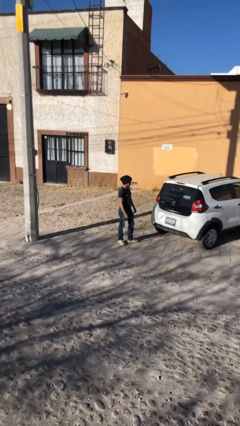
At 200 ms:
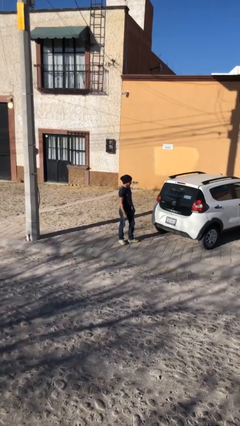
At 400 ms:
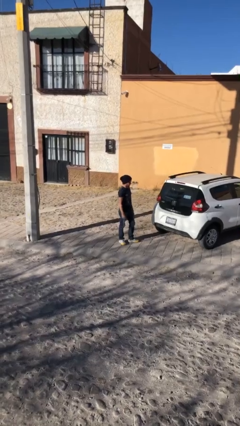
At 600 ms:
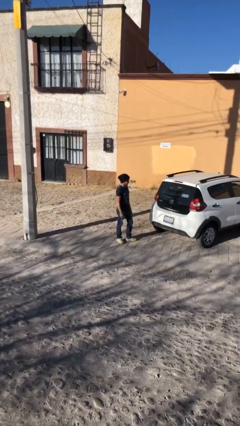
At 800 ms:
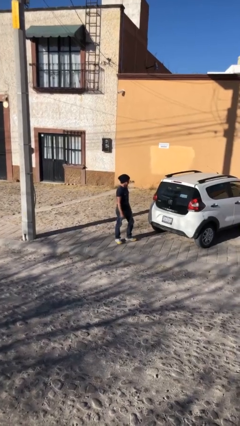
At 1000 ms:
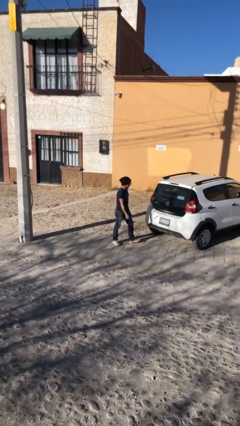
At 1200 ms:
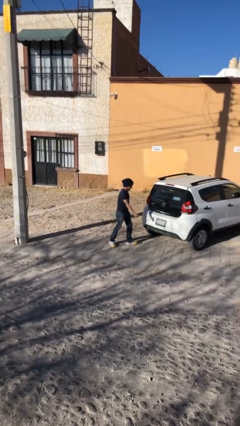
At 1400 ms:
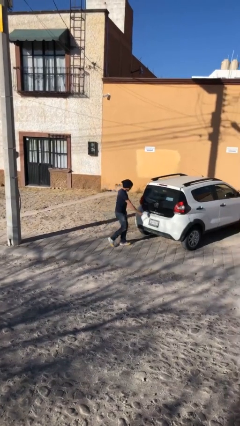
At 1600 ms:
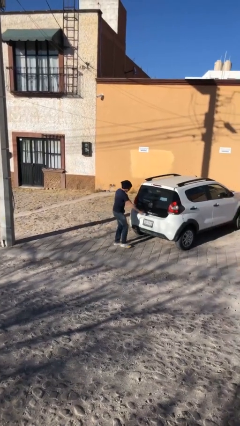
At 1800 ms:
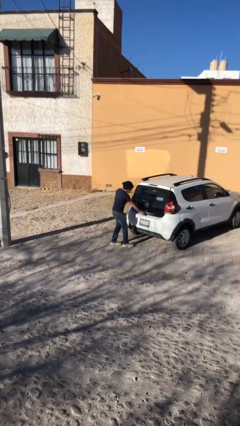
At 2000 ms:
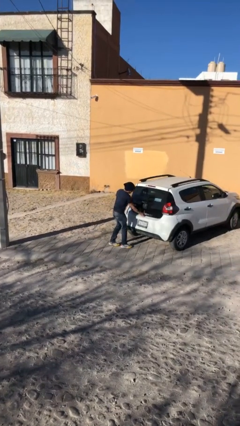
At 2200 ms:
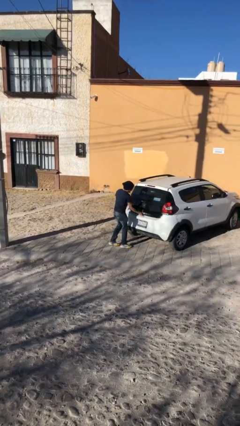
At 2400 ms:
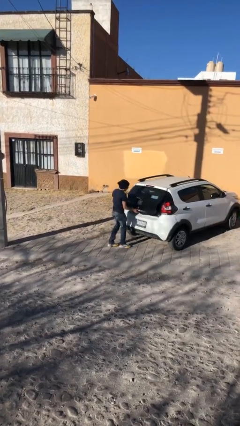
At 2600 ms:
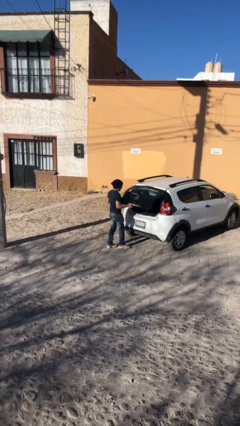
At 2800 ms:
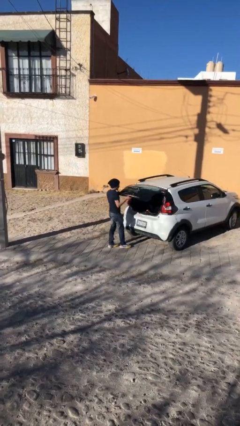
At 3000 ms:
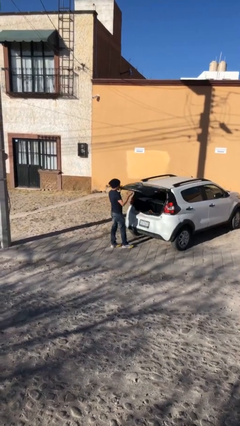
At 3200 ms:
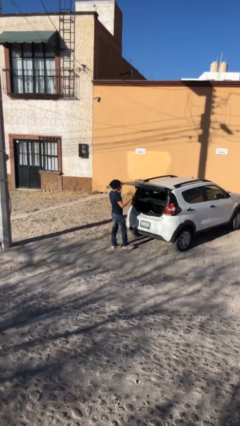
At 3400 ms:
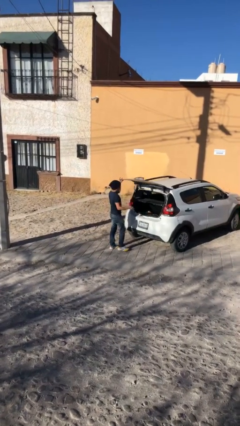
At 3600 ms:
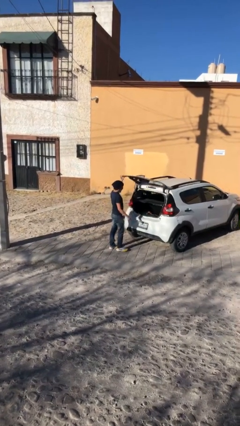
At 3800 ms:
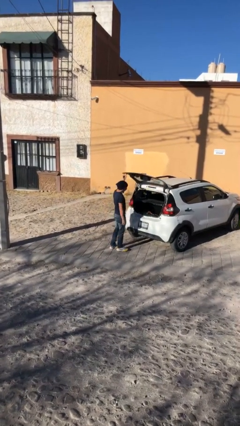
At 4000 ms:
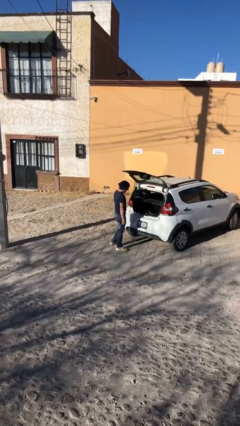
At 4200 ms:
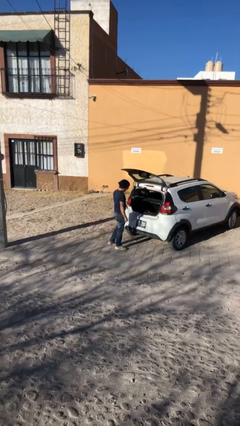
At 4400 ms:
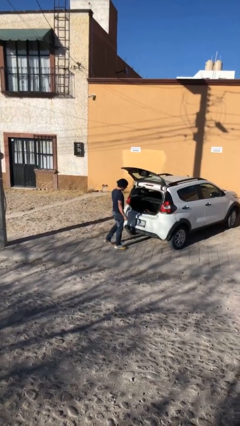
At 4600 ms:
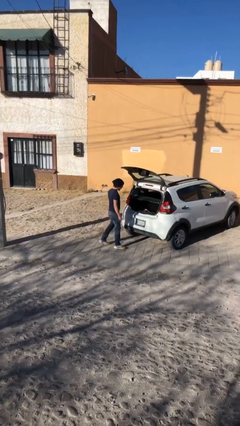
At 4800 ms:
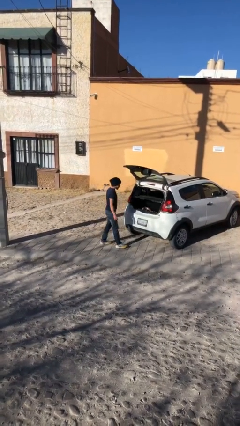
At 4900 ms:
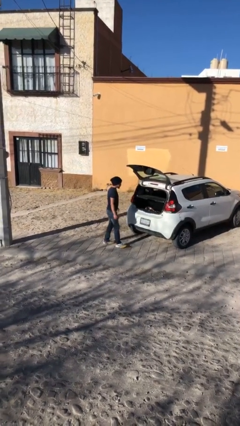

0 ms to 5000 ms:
person opens car trunk

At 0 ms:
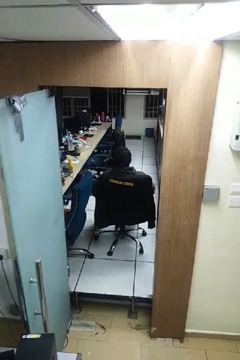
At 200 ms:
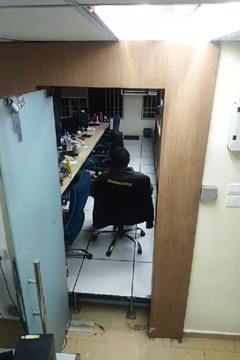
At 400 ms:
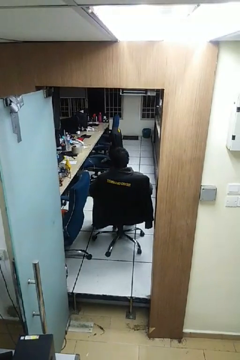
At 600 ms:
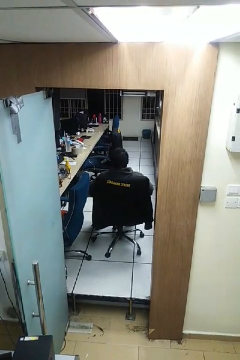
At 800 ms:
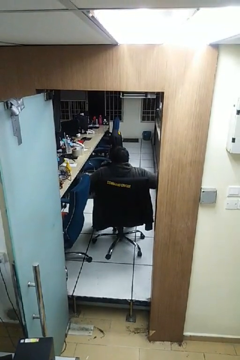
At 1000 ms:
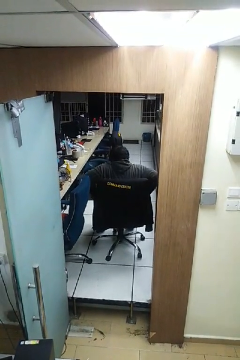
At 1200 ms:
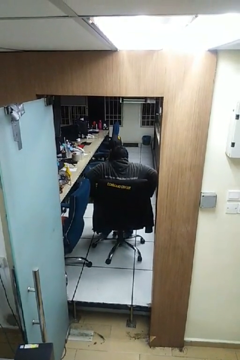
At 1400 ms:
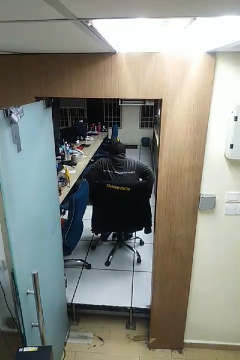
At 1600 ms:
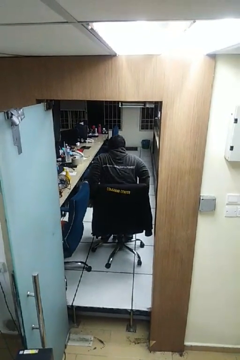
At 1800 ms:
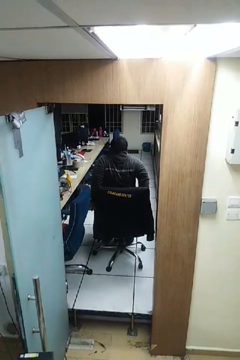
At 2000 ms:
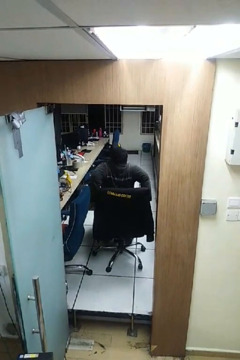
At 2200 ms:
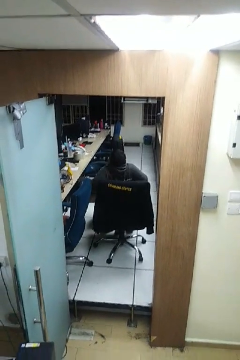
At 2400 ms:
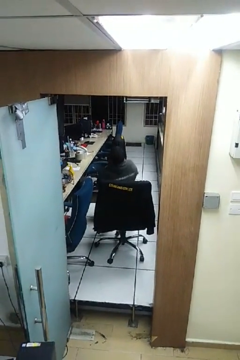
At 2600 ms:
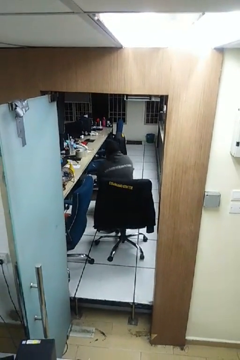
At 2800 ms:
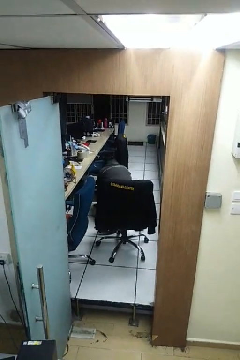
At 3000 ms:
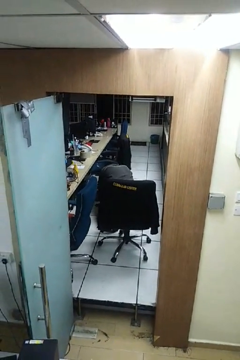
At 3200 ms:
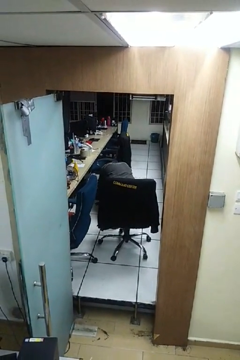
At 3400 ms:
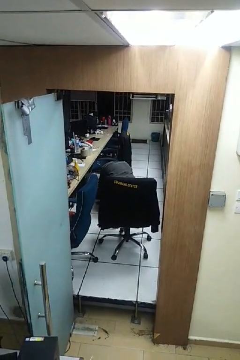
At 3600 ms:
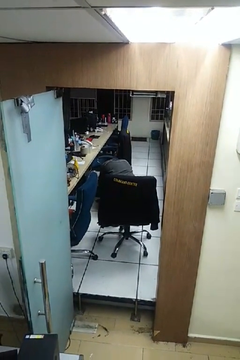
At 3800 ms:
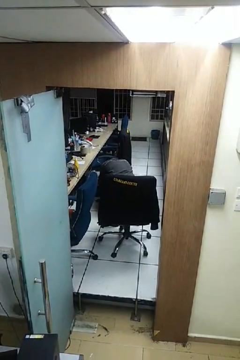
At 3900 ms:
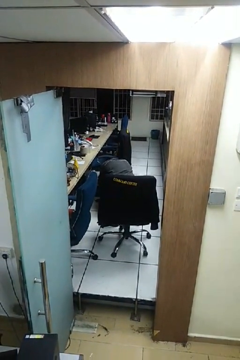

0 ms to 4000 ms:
person falls from chair

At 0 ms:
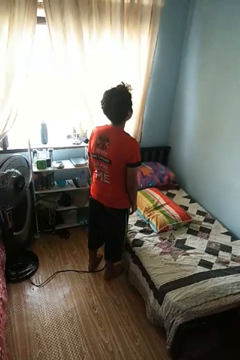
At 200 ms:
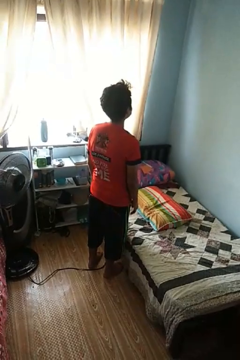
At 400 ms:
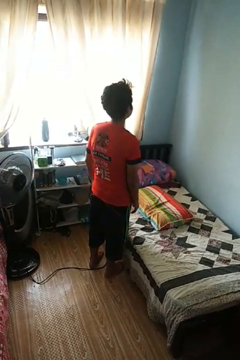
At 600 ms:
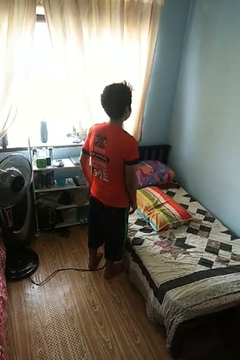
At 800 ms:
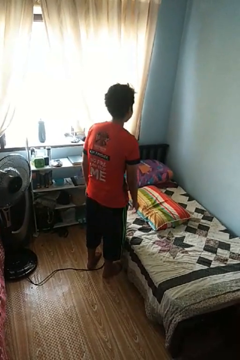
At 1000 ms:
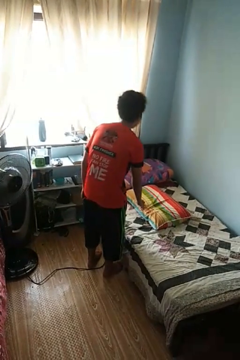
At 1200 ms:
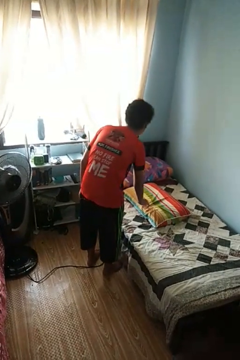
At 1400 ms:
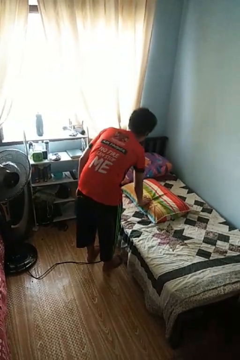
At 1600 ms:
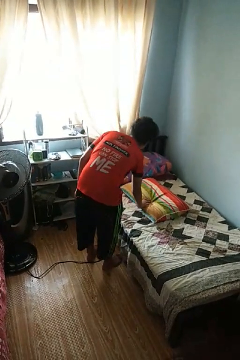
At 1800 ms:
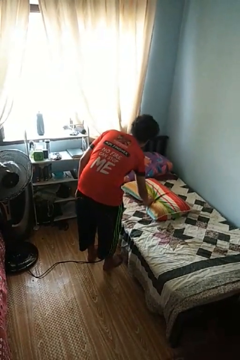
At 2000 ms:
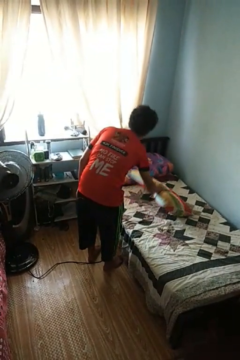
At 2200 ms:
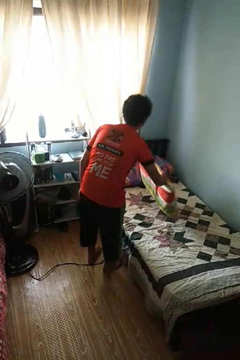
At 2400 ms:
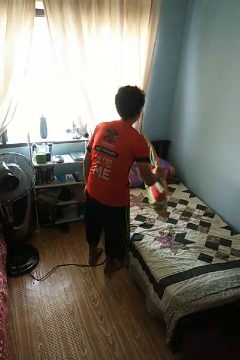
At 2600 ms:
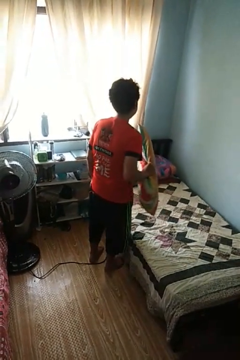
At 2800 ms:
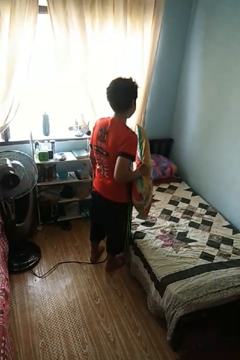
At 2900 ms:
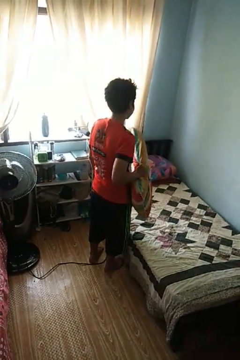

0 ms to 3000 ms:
person picks up object from bed

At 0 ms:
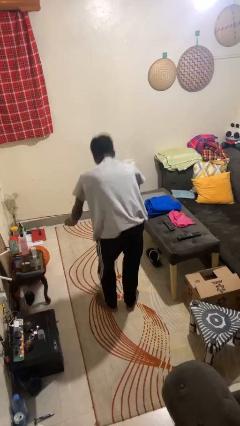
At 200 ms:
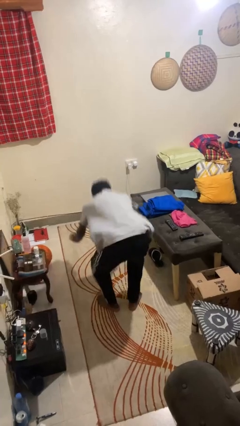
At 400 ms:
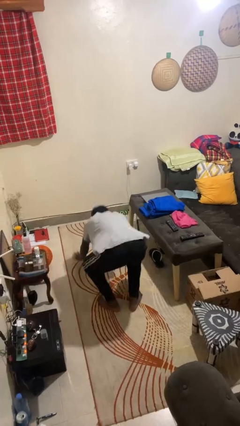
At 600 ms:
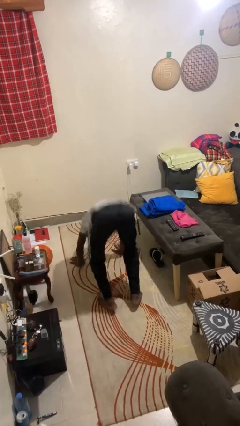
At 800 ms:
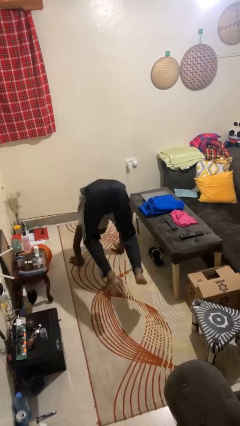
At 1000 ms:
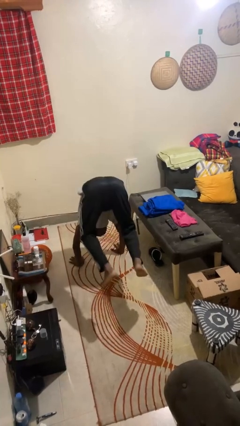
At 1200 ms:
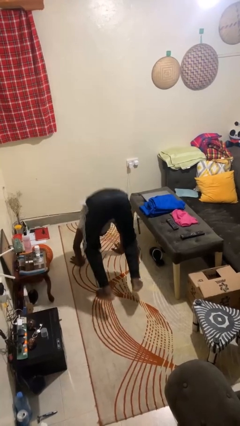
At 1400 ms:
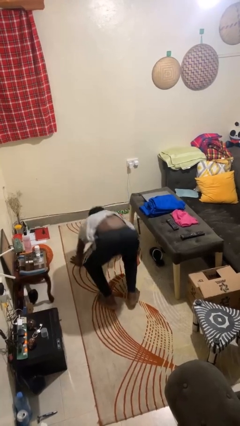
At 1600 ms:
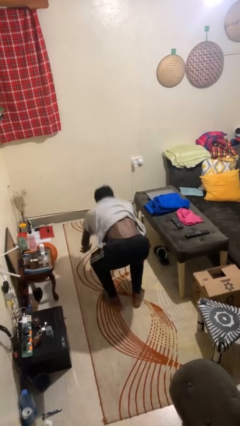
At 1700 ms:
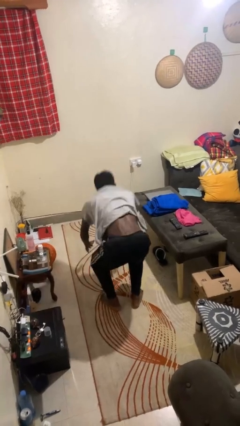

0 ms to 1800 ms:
person handstand

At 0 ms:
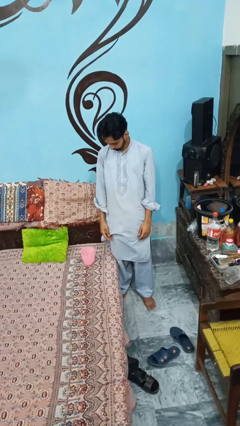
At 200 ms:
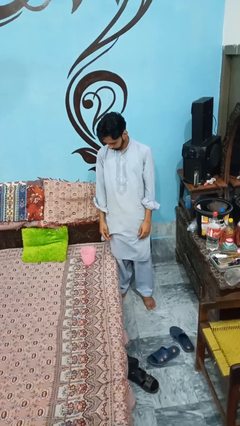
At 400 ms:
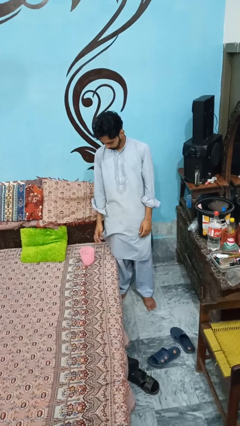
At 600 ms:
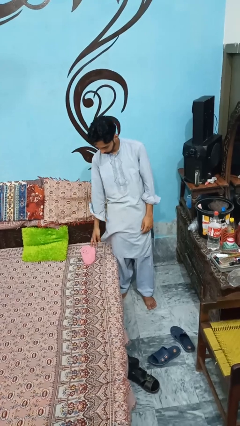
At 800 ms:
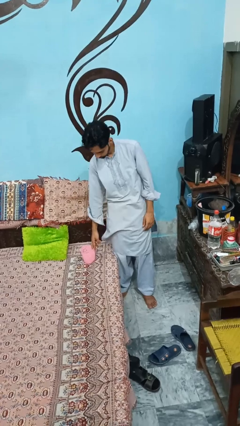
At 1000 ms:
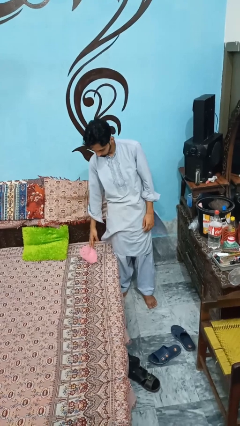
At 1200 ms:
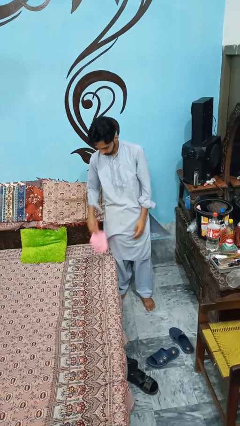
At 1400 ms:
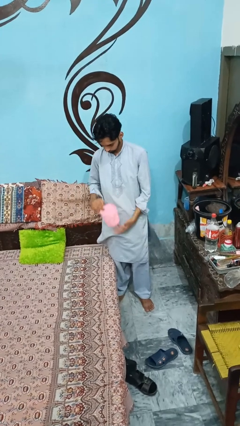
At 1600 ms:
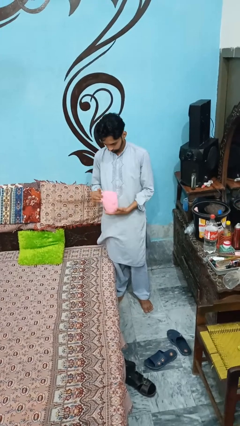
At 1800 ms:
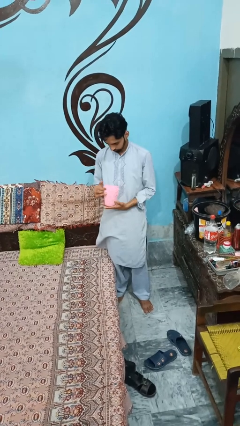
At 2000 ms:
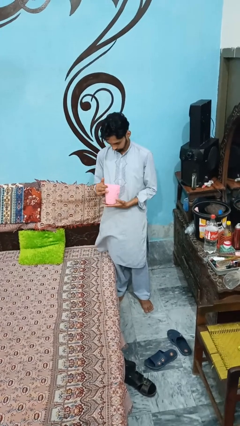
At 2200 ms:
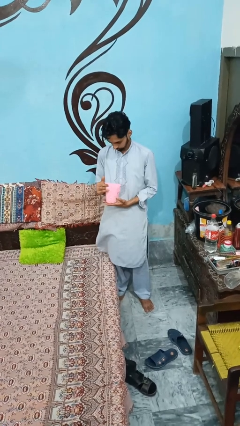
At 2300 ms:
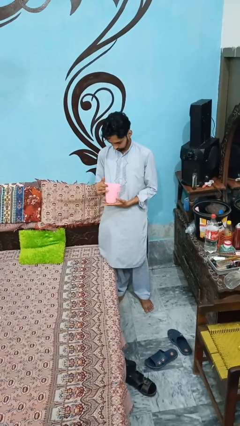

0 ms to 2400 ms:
person picks up object from couch

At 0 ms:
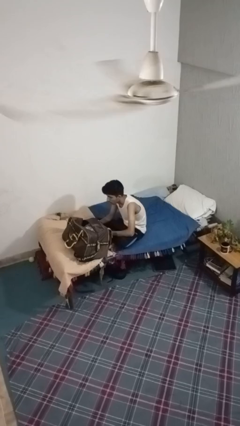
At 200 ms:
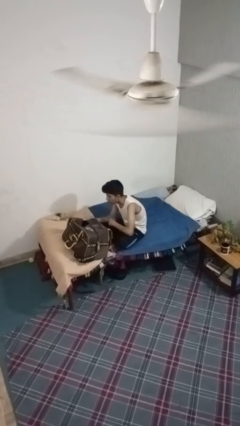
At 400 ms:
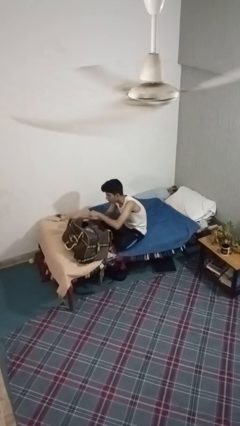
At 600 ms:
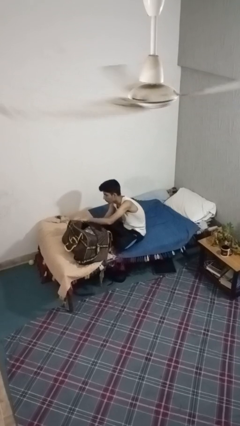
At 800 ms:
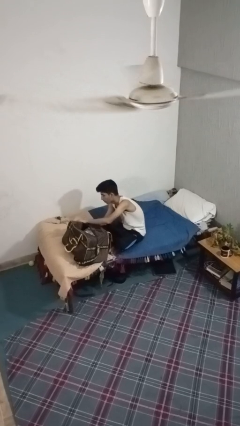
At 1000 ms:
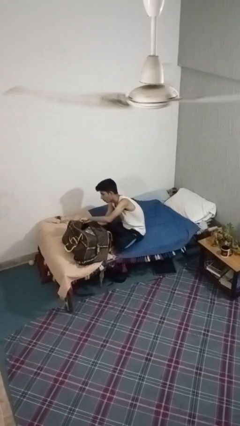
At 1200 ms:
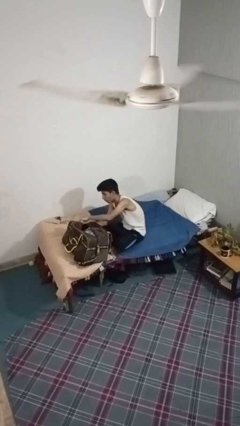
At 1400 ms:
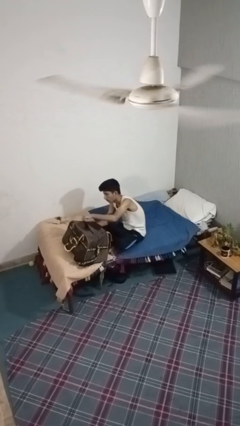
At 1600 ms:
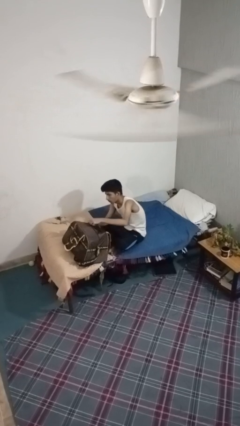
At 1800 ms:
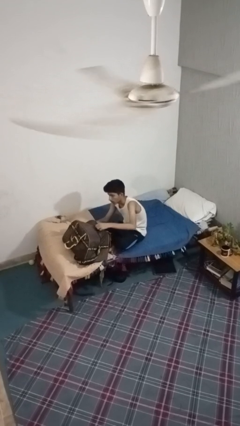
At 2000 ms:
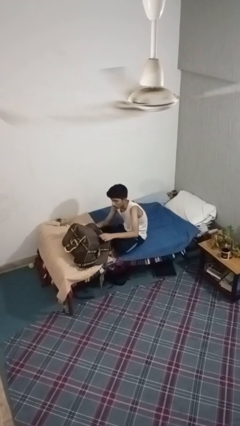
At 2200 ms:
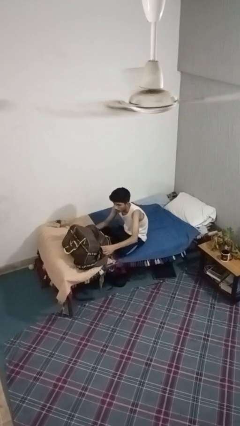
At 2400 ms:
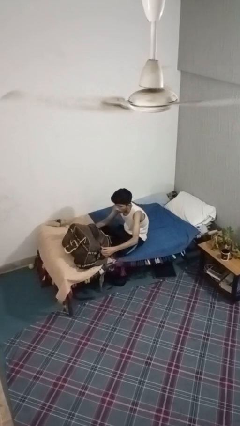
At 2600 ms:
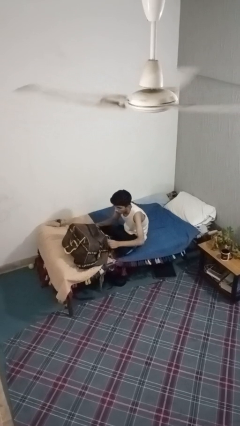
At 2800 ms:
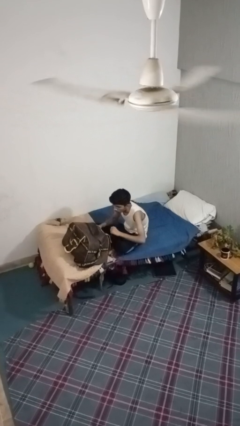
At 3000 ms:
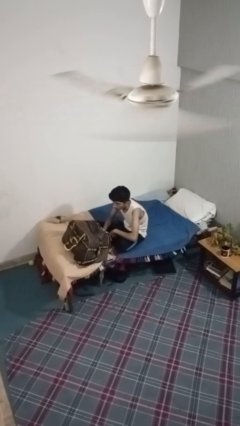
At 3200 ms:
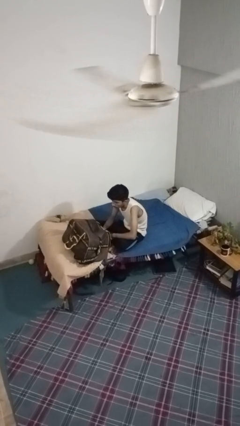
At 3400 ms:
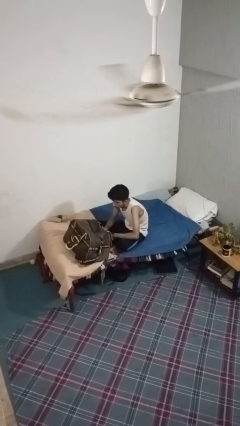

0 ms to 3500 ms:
person closes suitcase
